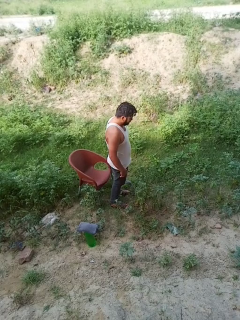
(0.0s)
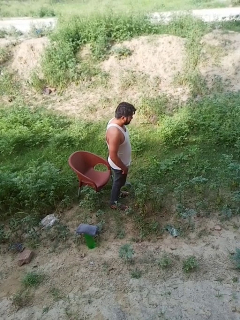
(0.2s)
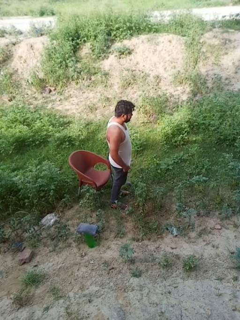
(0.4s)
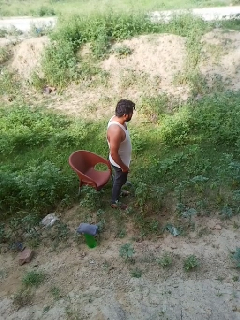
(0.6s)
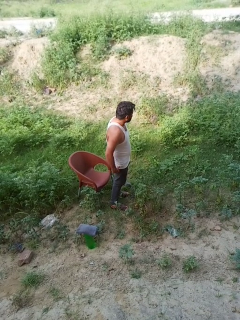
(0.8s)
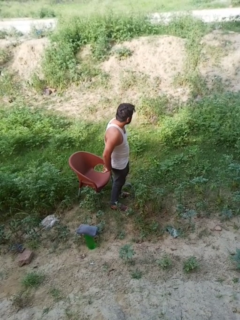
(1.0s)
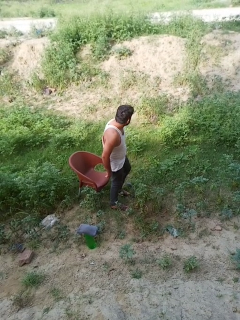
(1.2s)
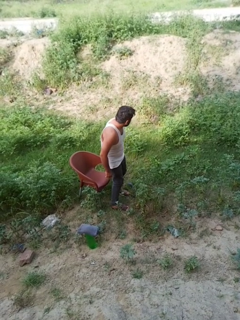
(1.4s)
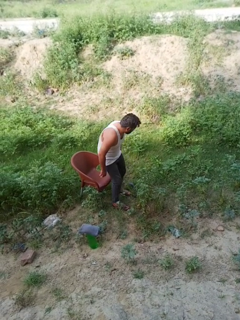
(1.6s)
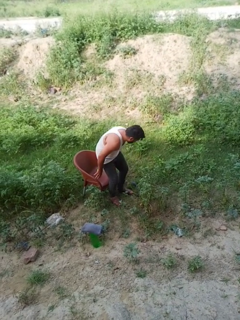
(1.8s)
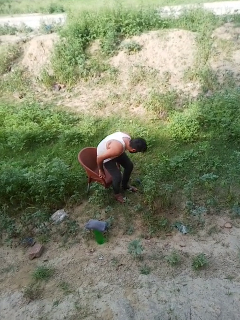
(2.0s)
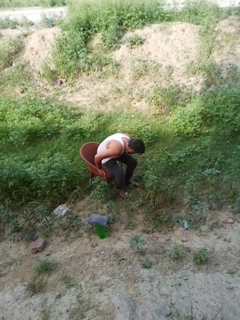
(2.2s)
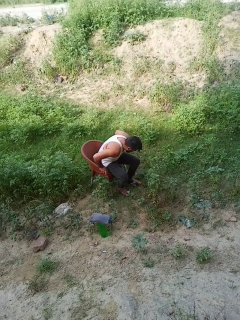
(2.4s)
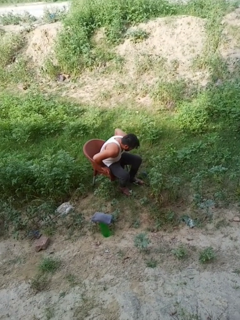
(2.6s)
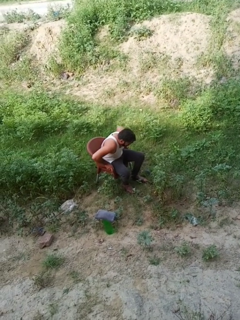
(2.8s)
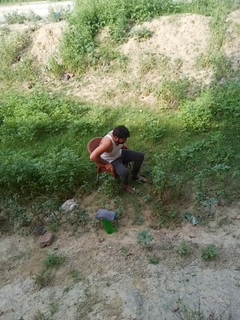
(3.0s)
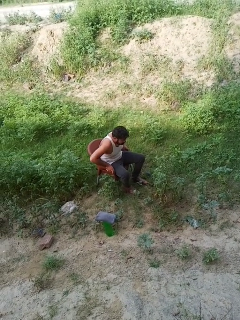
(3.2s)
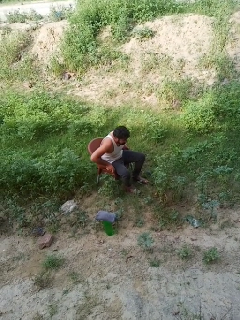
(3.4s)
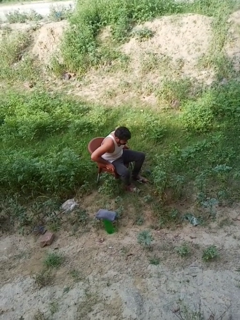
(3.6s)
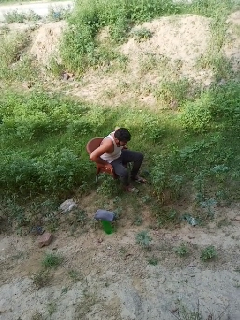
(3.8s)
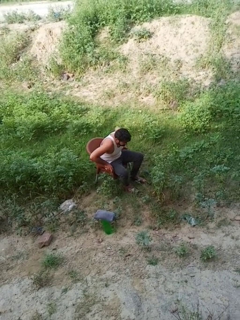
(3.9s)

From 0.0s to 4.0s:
person sits down

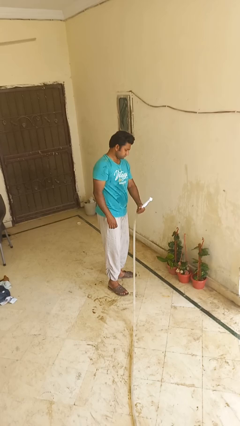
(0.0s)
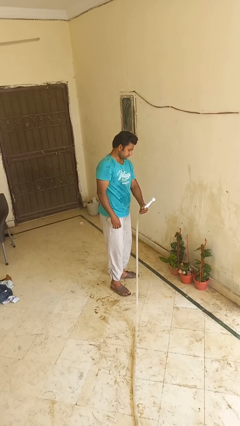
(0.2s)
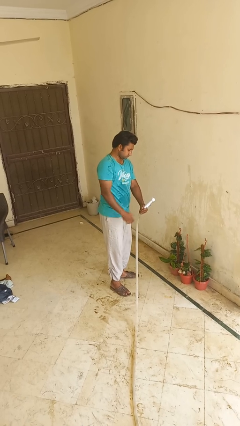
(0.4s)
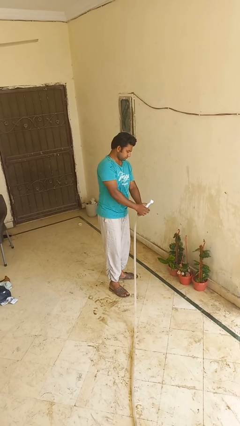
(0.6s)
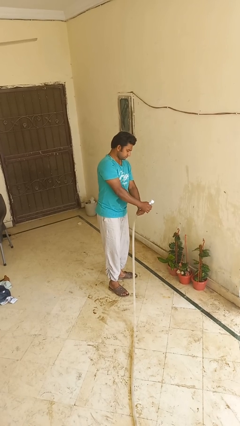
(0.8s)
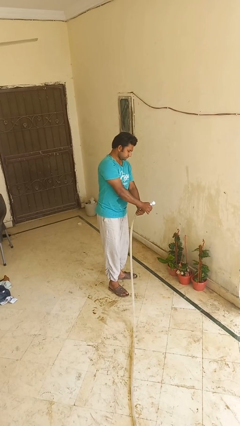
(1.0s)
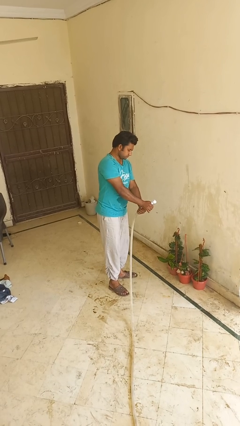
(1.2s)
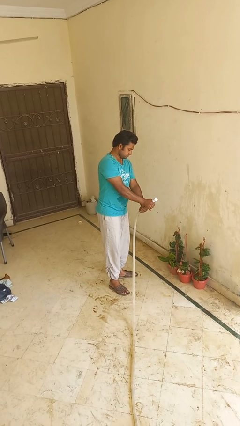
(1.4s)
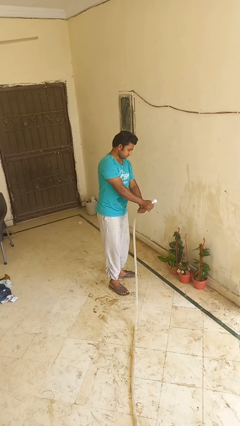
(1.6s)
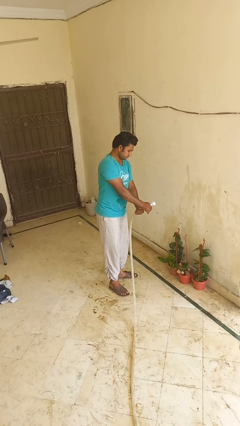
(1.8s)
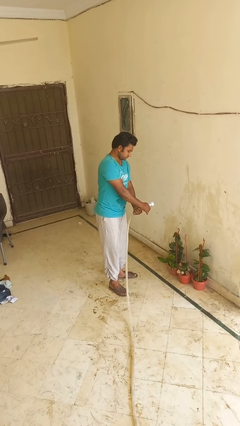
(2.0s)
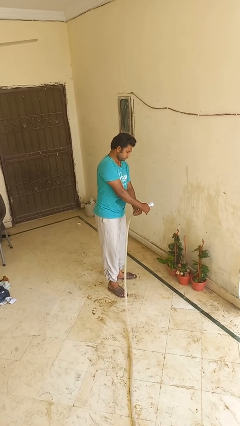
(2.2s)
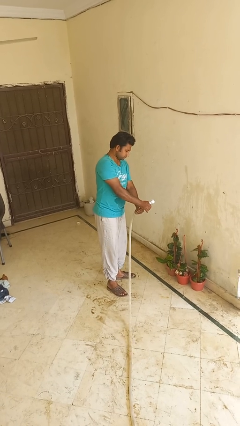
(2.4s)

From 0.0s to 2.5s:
person waters houseplant

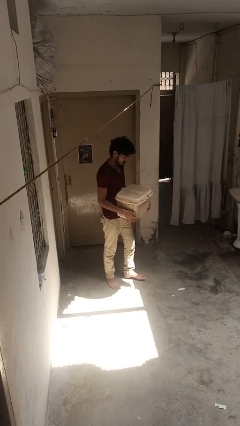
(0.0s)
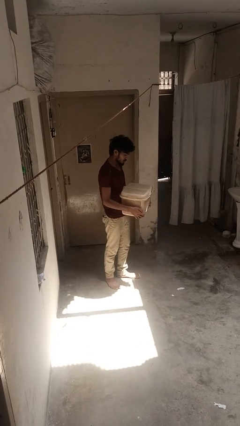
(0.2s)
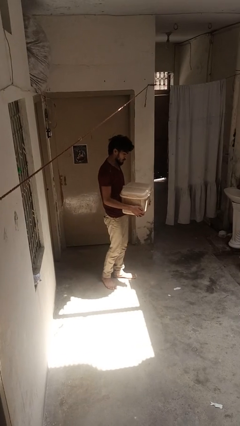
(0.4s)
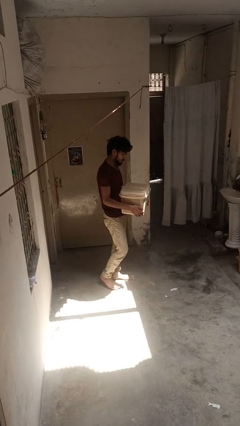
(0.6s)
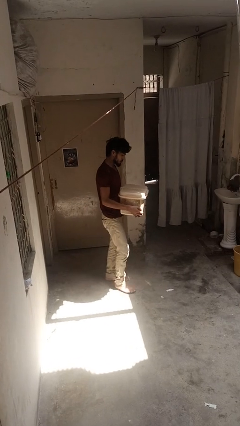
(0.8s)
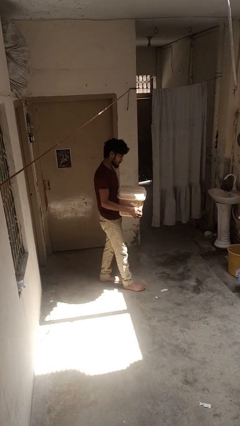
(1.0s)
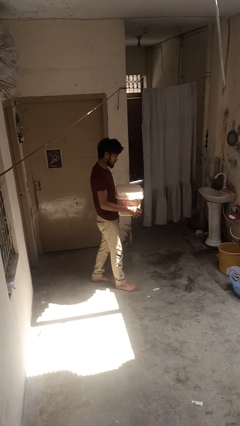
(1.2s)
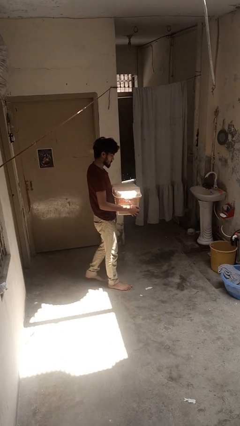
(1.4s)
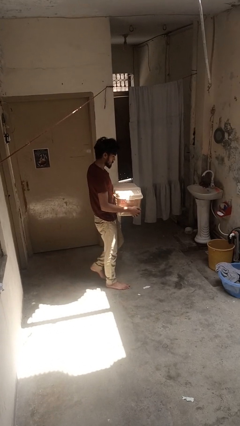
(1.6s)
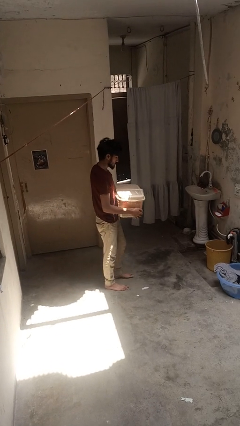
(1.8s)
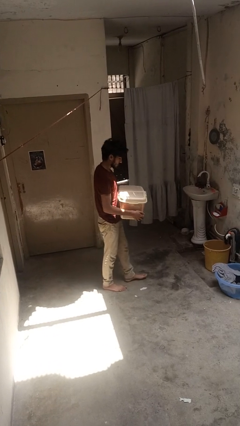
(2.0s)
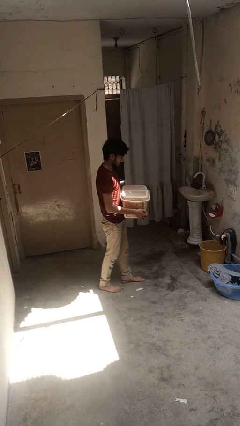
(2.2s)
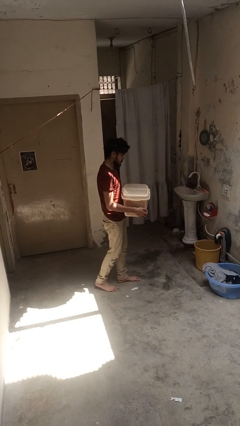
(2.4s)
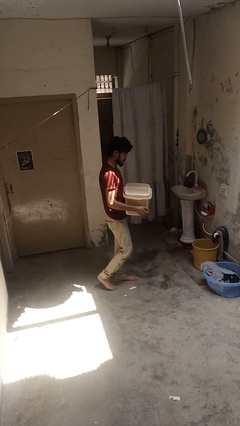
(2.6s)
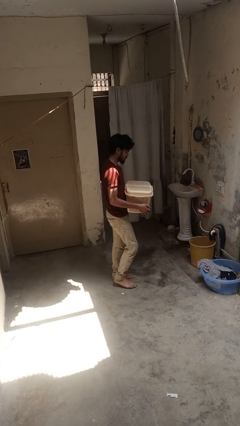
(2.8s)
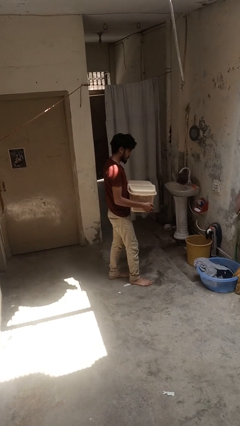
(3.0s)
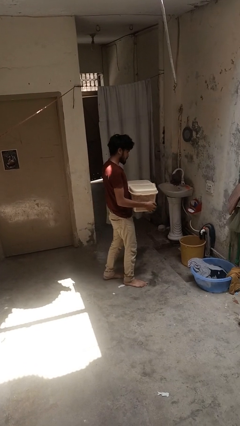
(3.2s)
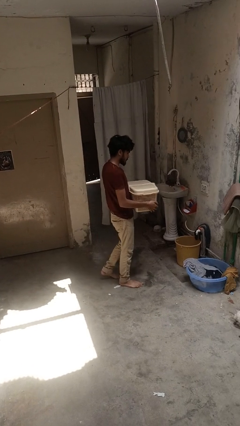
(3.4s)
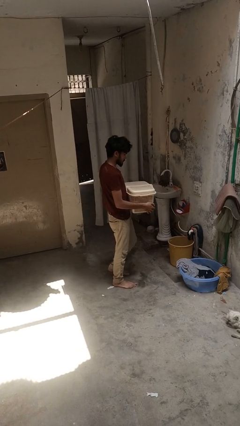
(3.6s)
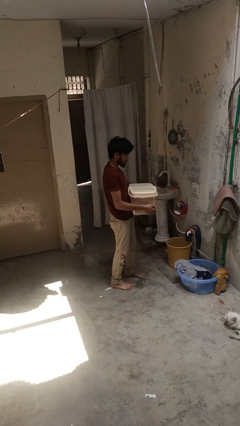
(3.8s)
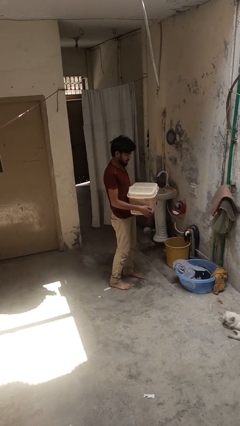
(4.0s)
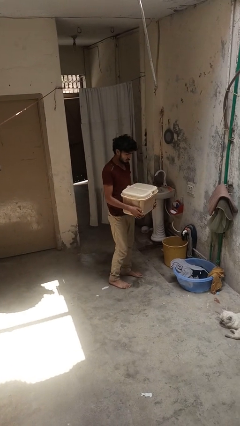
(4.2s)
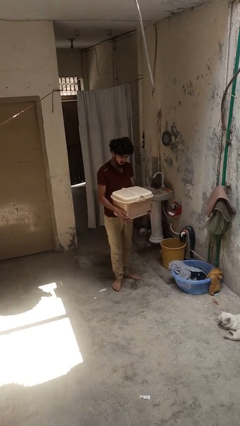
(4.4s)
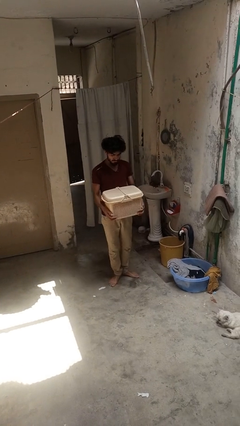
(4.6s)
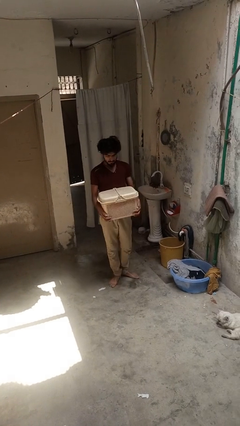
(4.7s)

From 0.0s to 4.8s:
person carries laundry basket

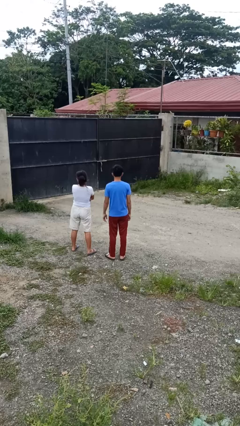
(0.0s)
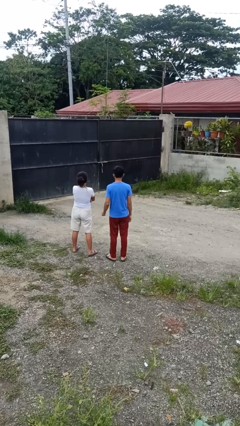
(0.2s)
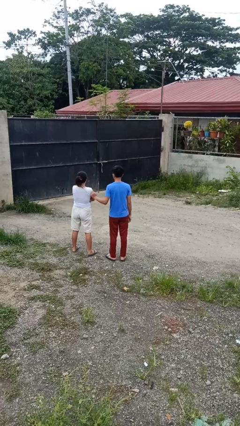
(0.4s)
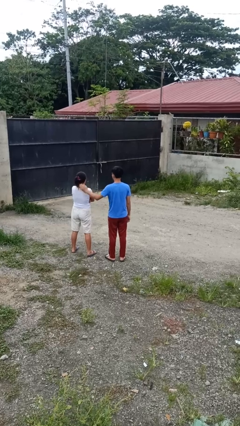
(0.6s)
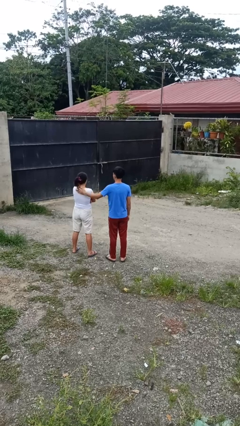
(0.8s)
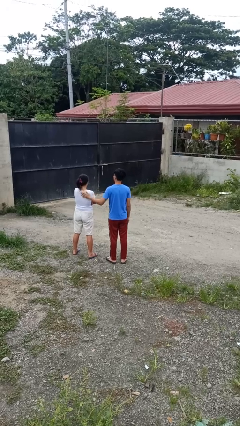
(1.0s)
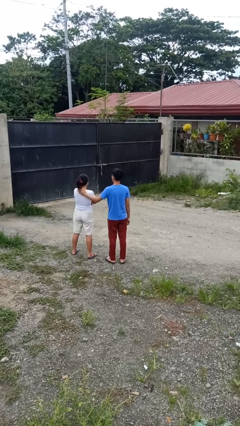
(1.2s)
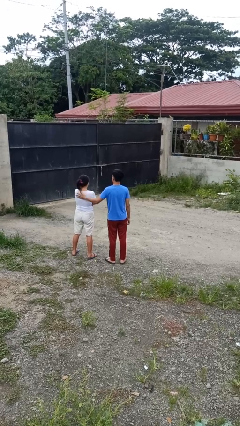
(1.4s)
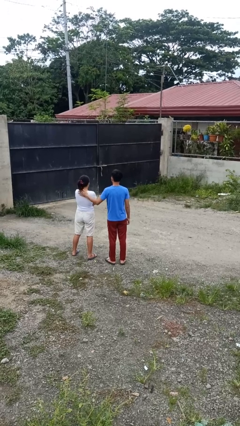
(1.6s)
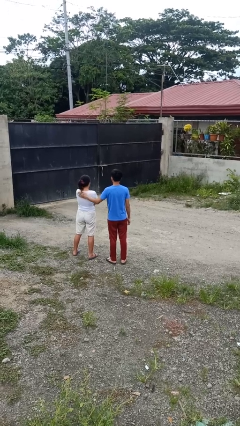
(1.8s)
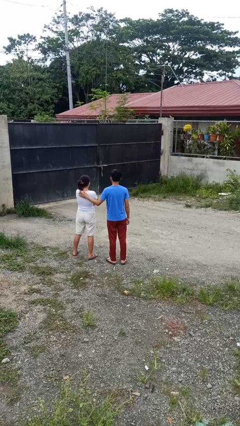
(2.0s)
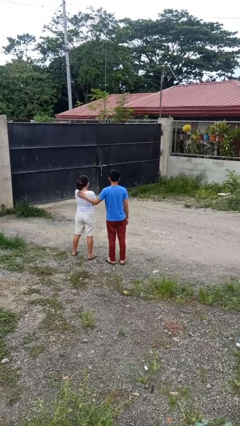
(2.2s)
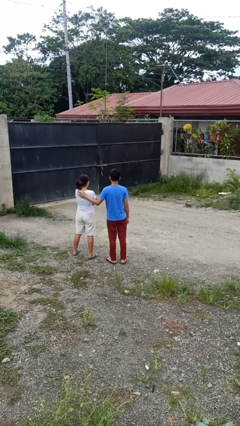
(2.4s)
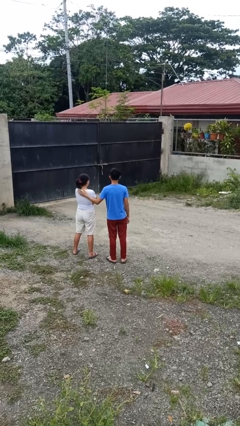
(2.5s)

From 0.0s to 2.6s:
person touches back of person

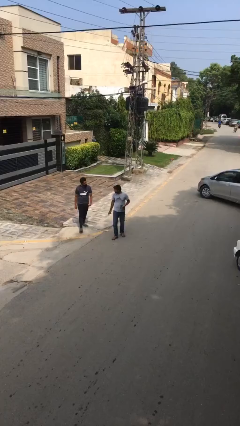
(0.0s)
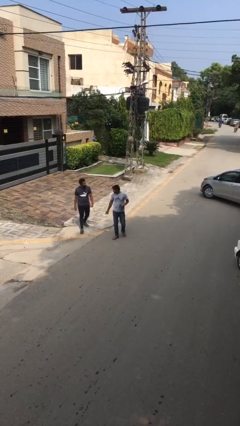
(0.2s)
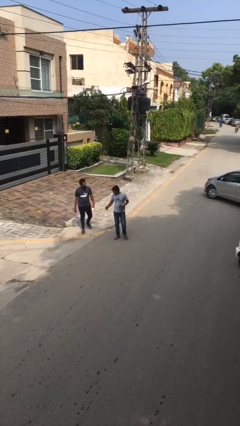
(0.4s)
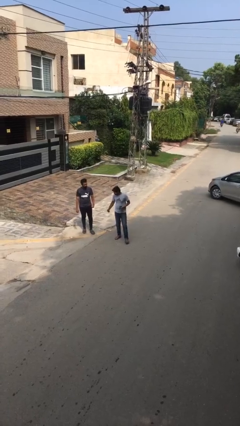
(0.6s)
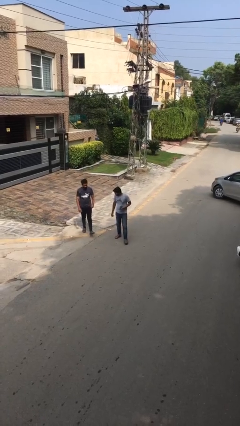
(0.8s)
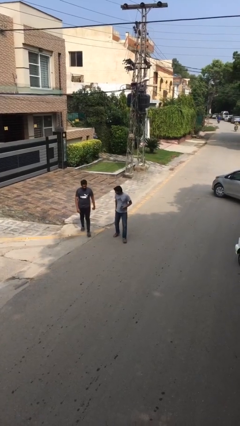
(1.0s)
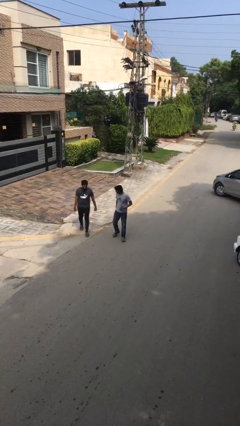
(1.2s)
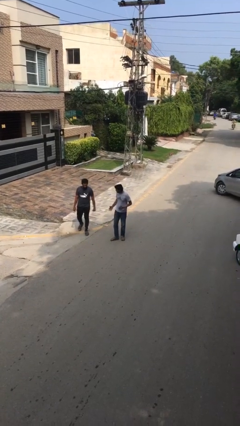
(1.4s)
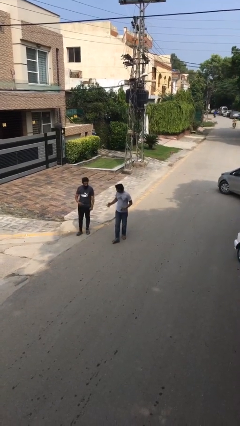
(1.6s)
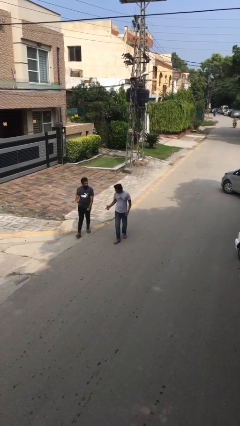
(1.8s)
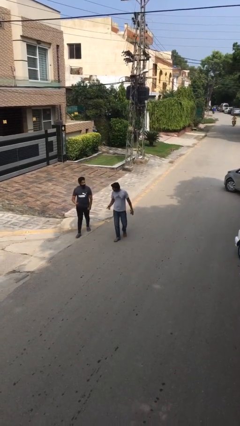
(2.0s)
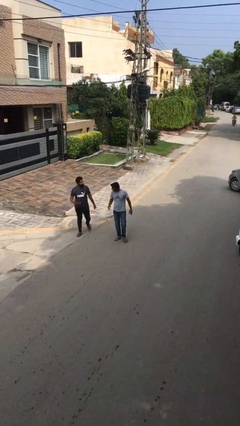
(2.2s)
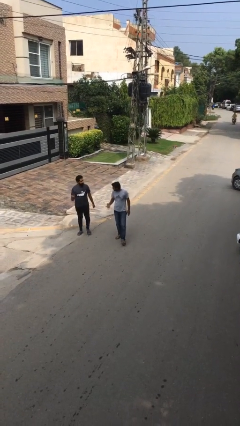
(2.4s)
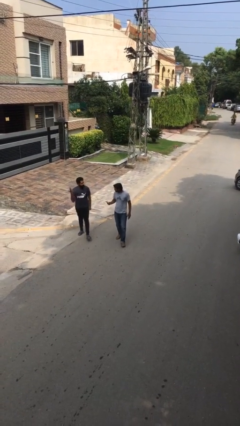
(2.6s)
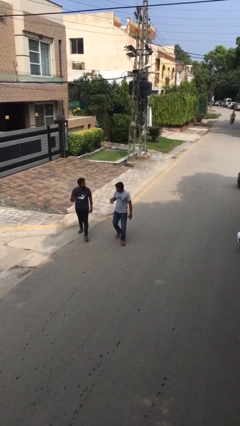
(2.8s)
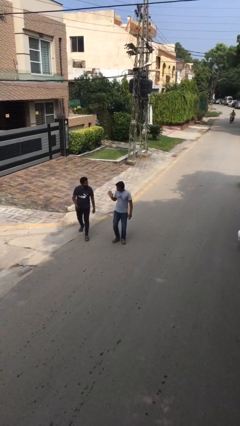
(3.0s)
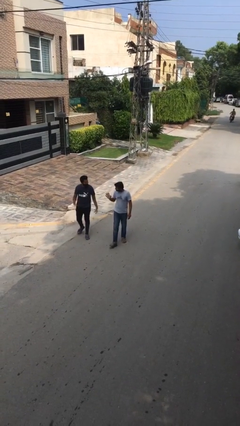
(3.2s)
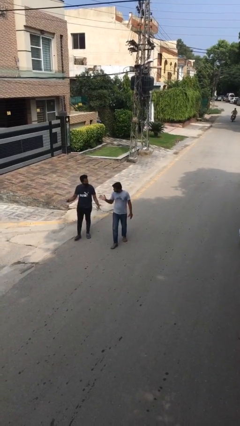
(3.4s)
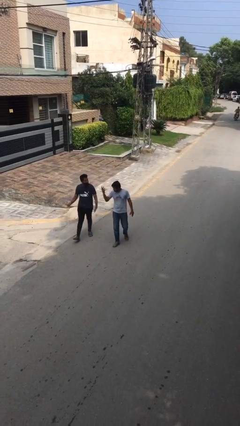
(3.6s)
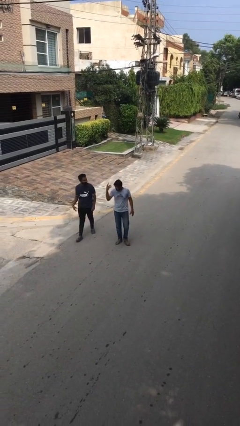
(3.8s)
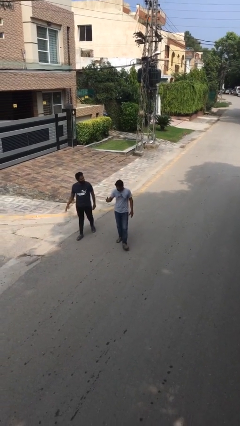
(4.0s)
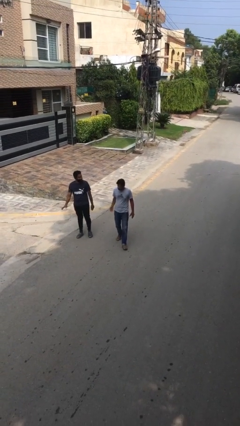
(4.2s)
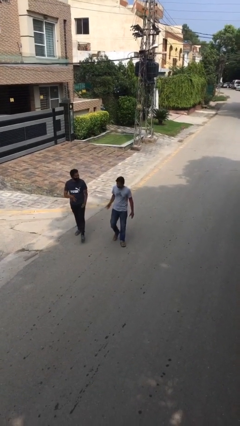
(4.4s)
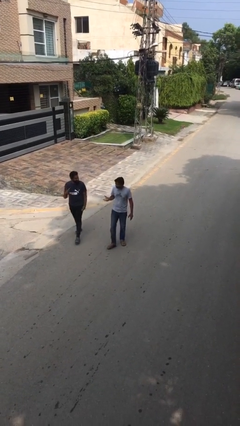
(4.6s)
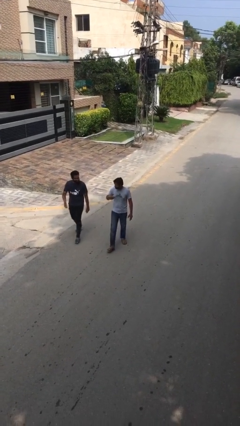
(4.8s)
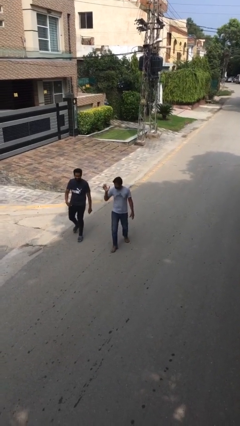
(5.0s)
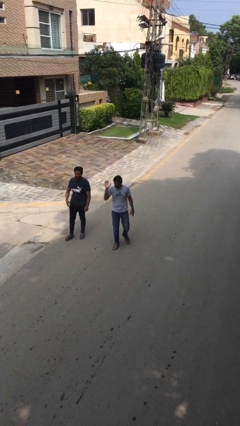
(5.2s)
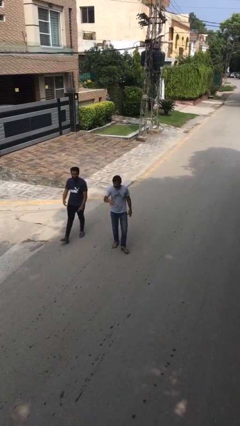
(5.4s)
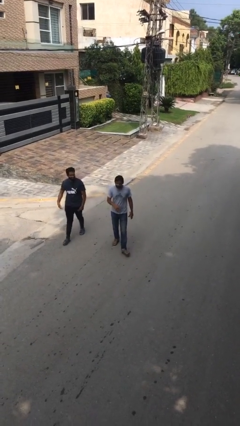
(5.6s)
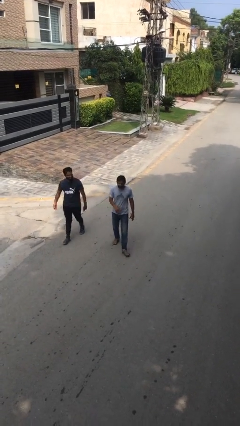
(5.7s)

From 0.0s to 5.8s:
person talks to person
